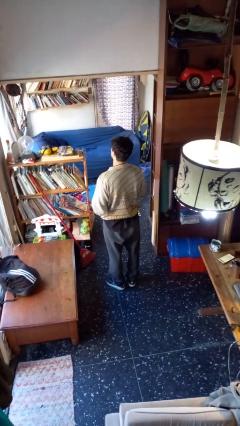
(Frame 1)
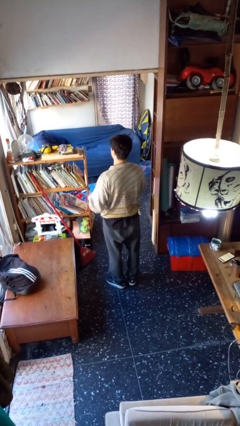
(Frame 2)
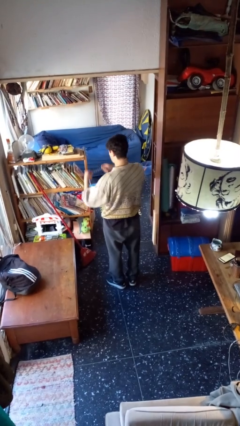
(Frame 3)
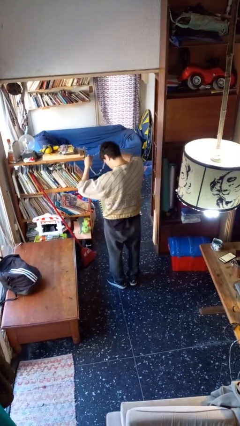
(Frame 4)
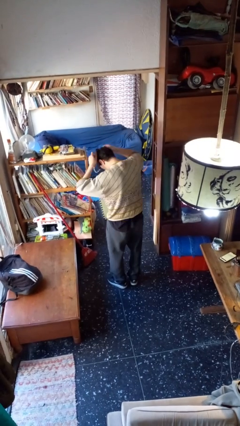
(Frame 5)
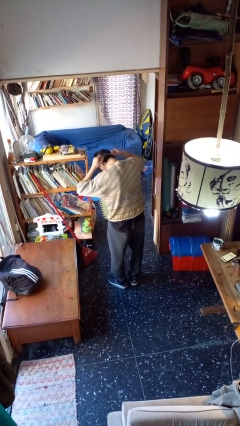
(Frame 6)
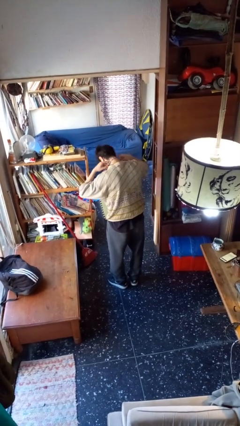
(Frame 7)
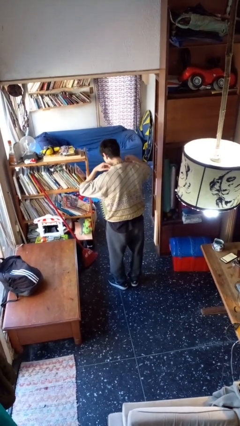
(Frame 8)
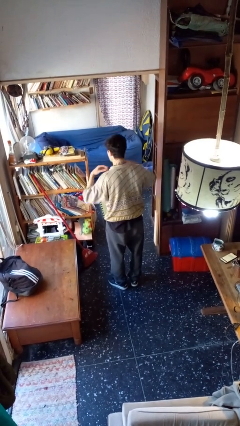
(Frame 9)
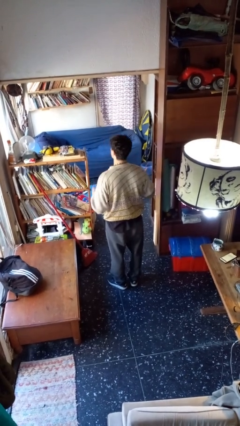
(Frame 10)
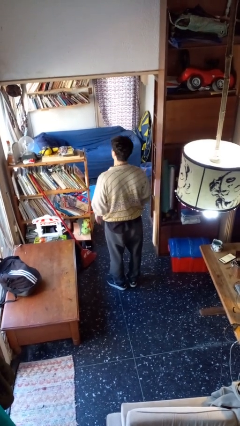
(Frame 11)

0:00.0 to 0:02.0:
person puts on necklace

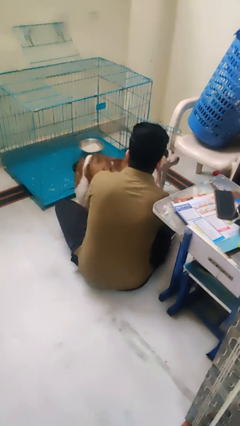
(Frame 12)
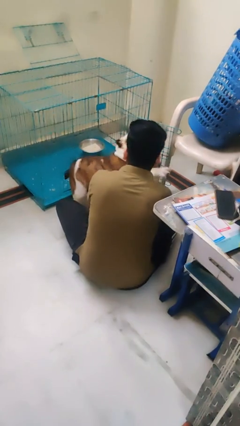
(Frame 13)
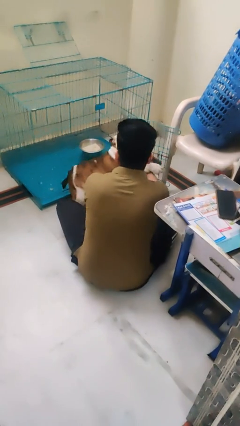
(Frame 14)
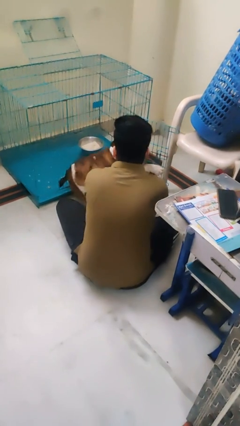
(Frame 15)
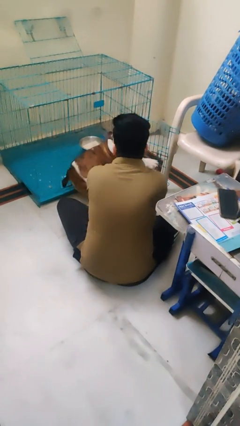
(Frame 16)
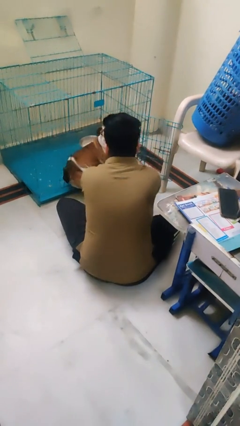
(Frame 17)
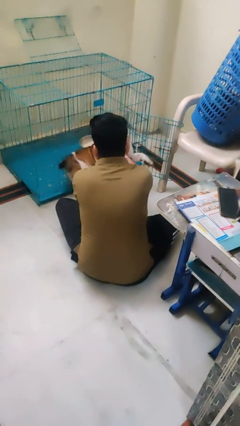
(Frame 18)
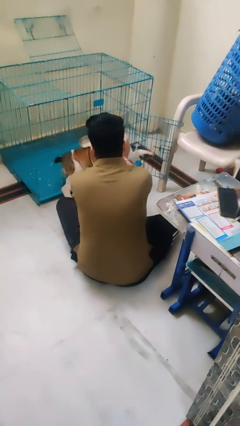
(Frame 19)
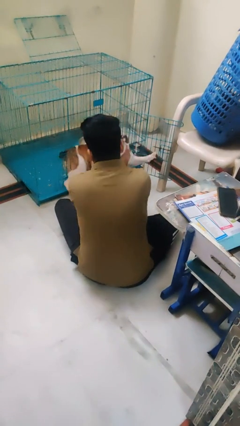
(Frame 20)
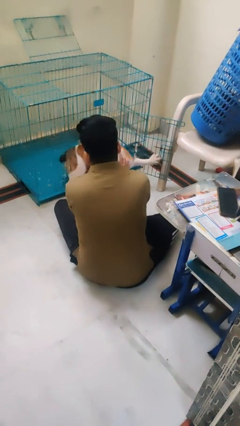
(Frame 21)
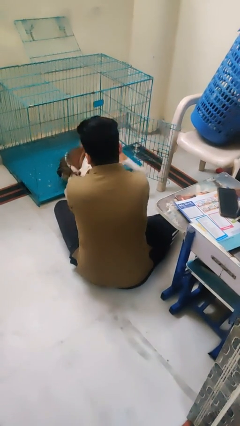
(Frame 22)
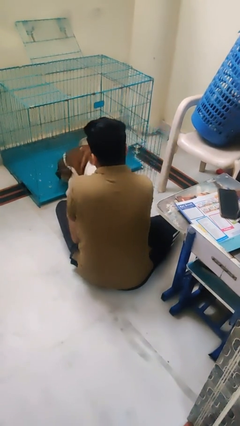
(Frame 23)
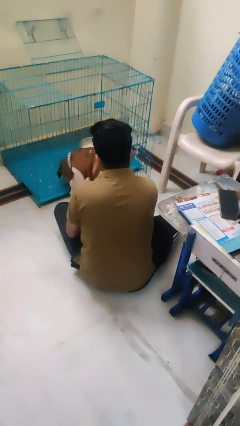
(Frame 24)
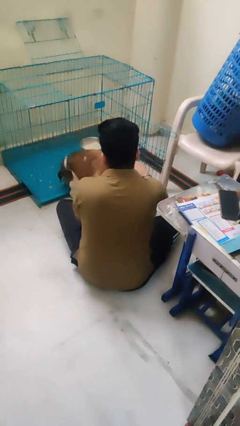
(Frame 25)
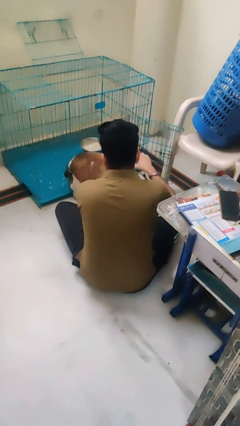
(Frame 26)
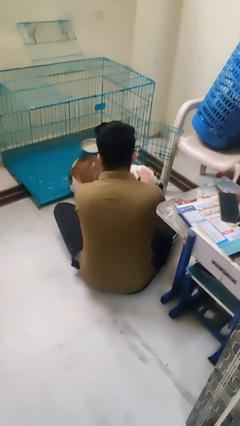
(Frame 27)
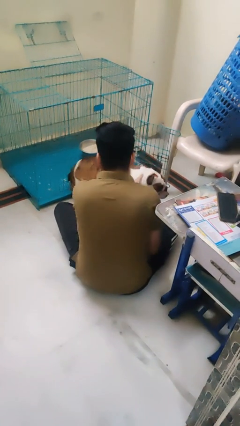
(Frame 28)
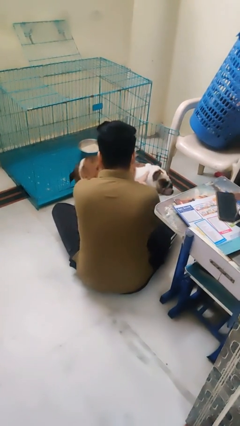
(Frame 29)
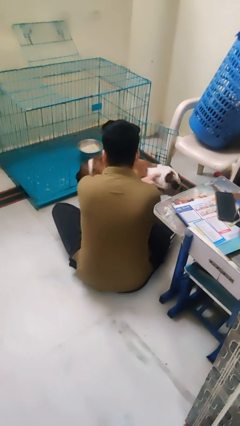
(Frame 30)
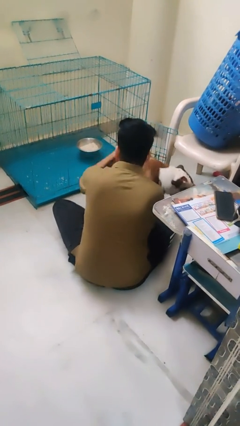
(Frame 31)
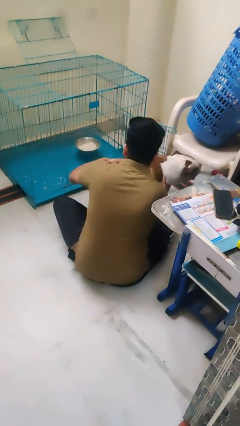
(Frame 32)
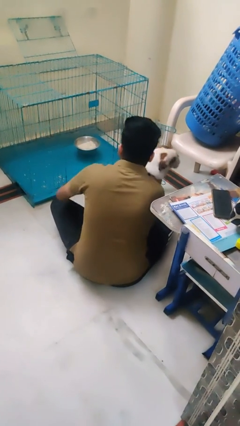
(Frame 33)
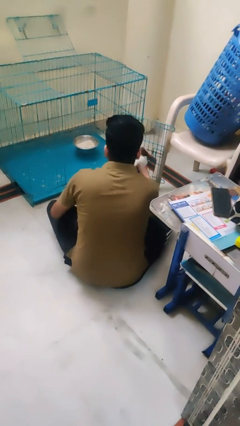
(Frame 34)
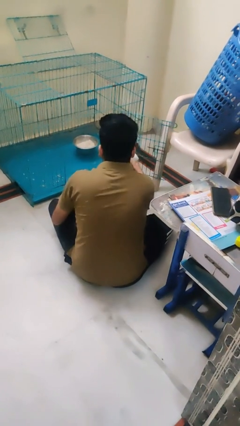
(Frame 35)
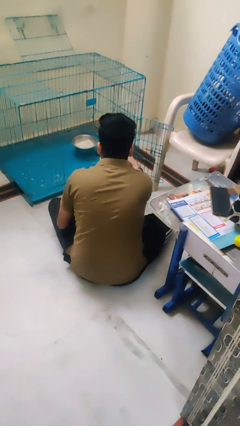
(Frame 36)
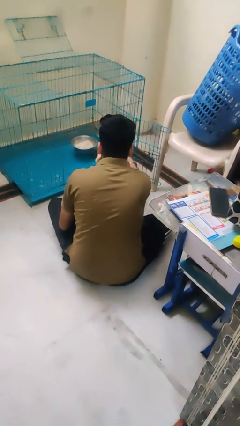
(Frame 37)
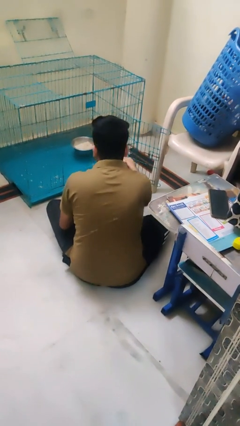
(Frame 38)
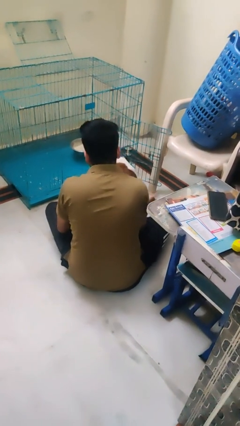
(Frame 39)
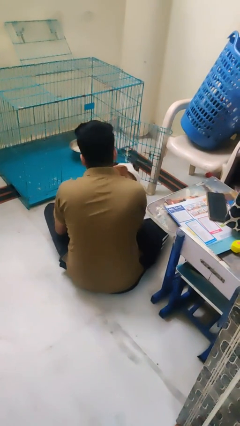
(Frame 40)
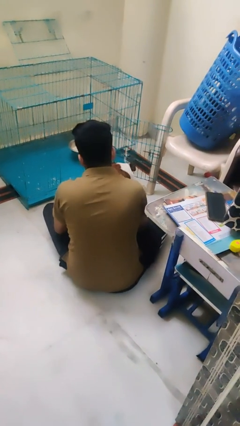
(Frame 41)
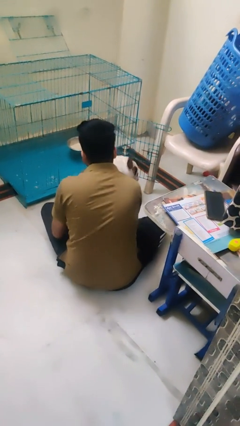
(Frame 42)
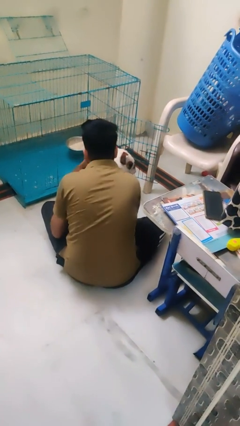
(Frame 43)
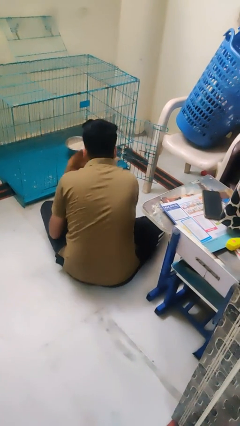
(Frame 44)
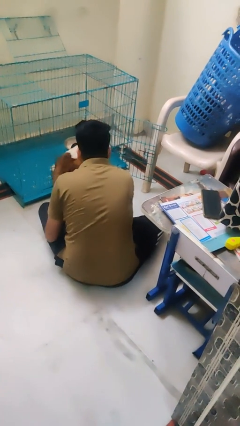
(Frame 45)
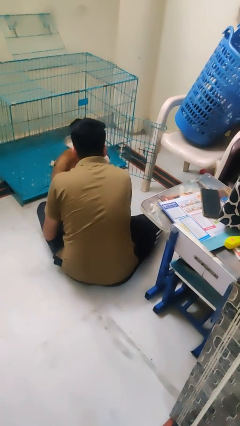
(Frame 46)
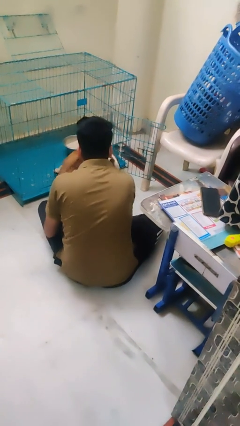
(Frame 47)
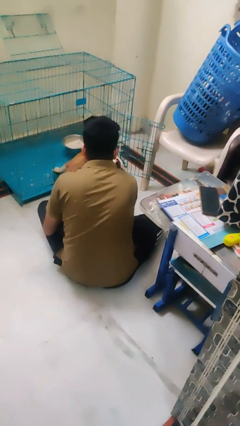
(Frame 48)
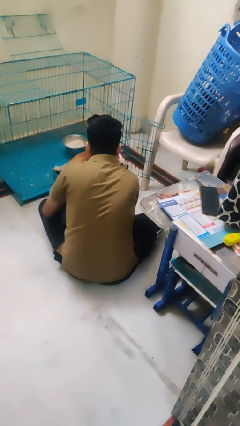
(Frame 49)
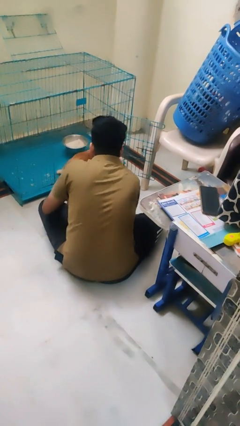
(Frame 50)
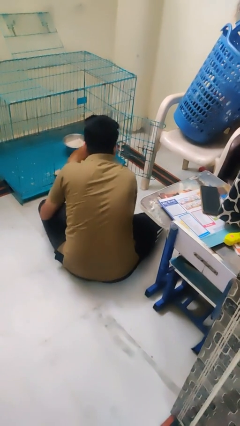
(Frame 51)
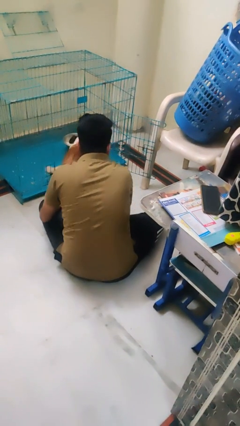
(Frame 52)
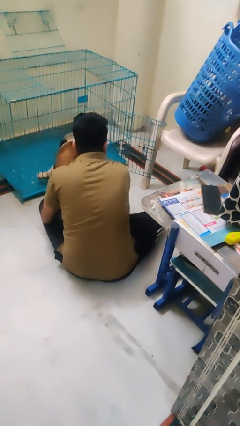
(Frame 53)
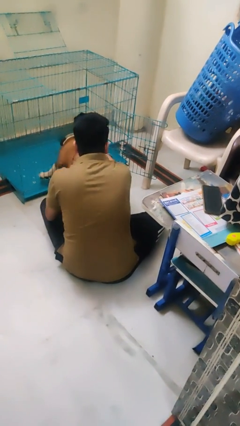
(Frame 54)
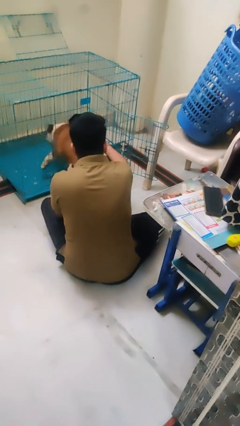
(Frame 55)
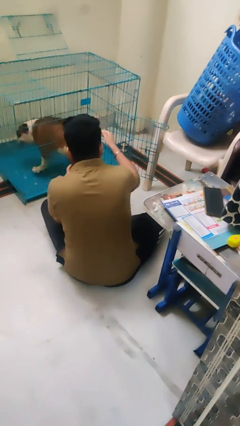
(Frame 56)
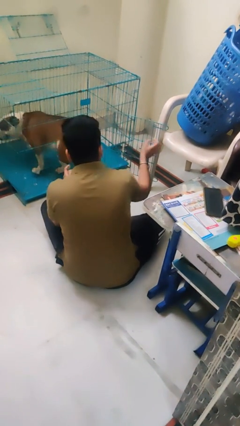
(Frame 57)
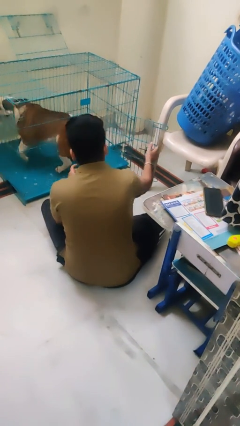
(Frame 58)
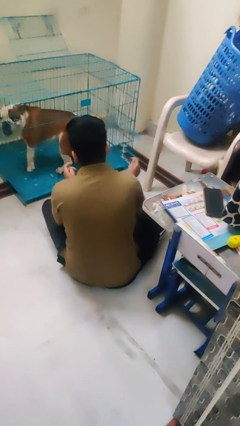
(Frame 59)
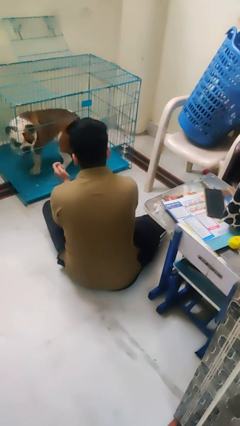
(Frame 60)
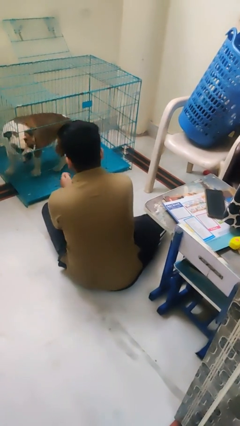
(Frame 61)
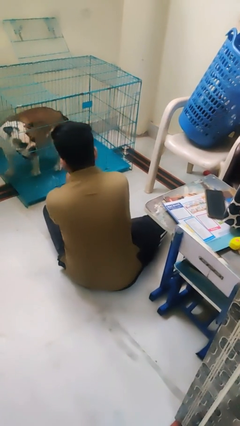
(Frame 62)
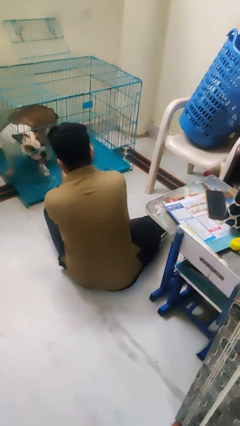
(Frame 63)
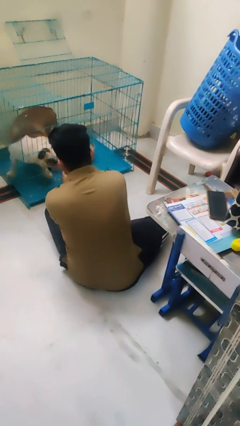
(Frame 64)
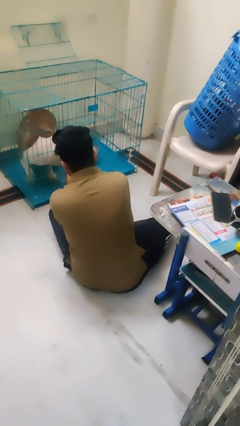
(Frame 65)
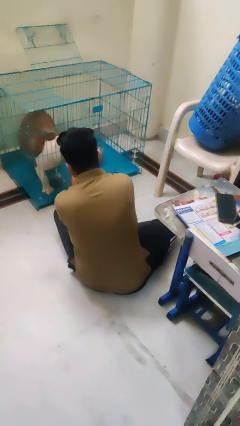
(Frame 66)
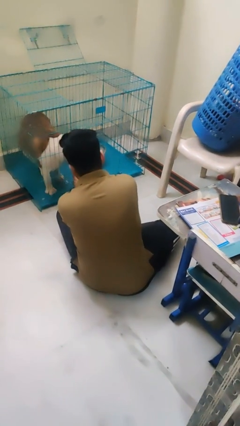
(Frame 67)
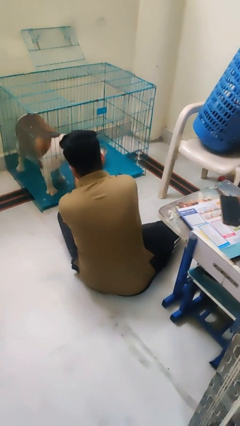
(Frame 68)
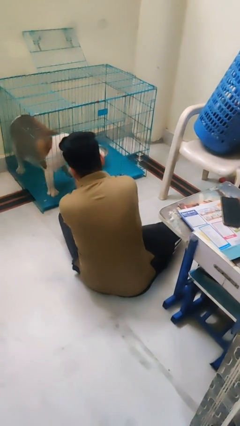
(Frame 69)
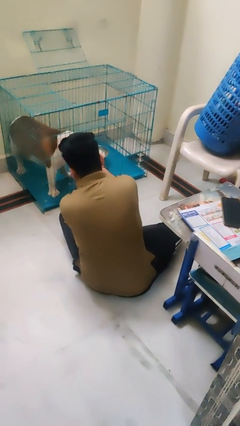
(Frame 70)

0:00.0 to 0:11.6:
person crates dog

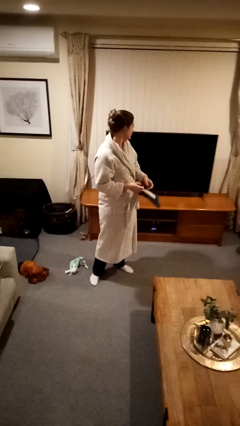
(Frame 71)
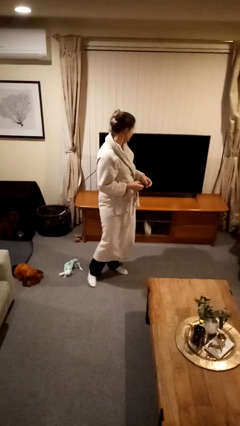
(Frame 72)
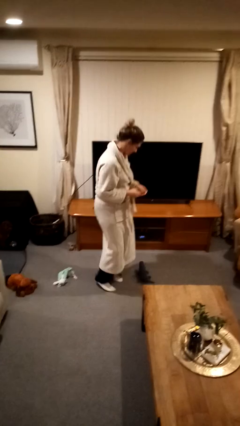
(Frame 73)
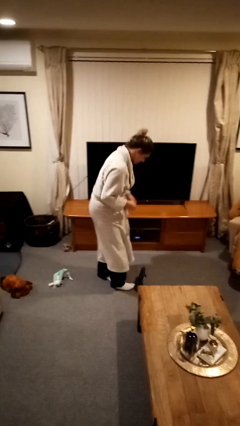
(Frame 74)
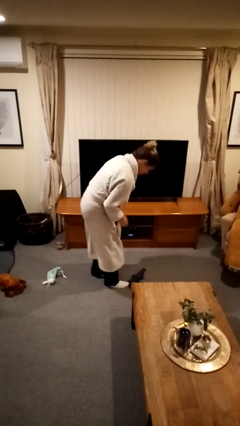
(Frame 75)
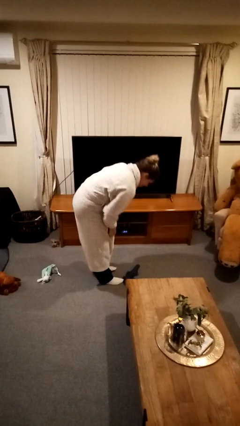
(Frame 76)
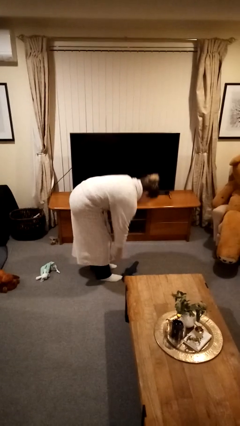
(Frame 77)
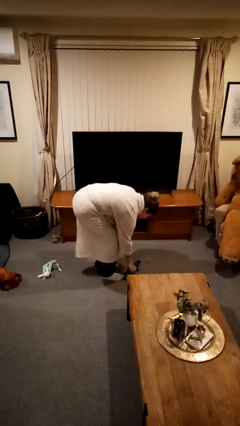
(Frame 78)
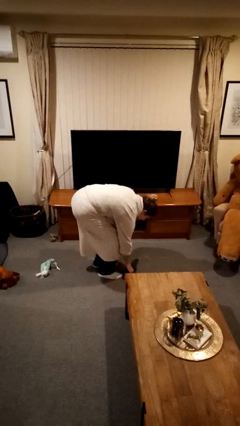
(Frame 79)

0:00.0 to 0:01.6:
person drops object

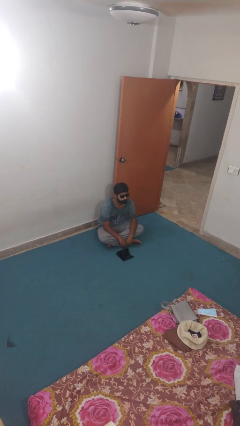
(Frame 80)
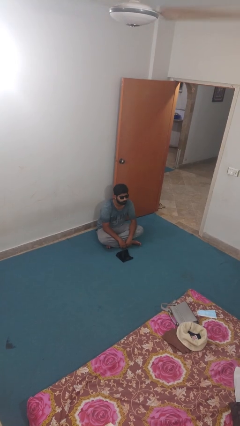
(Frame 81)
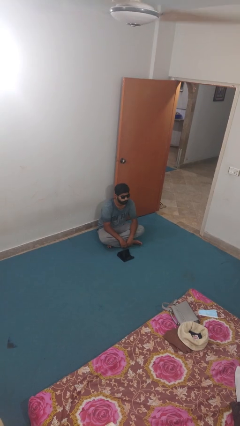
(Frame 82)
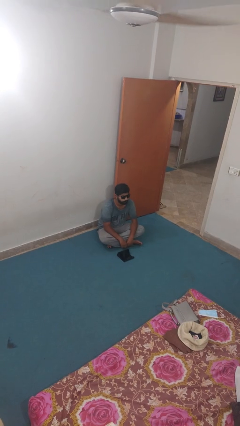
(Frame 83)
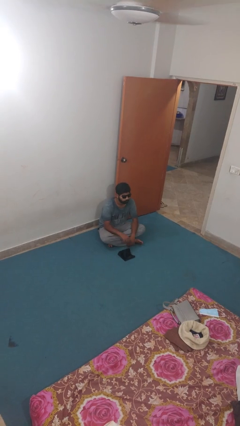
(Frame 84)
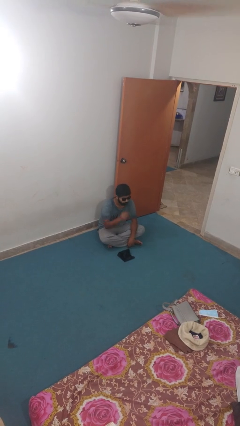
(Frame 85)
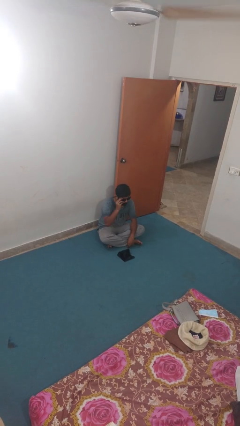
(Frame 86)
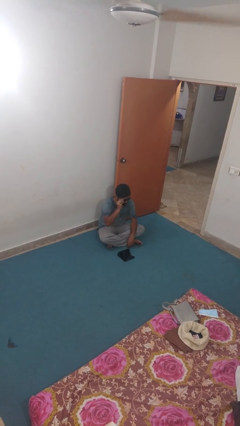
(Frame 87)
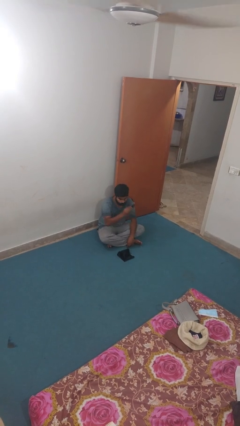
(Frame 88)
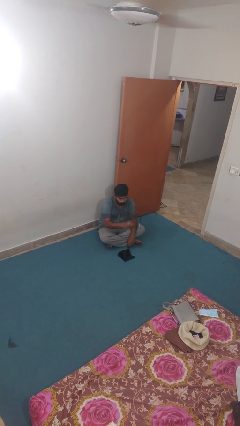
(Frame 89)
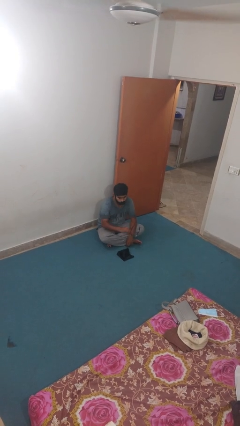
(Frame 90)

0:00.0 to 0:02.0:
person takes off sunglasses

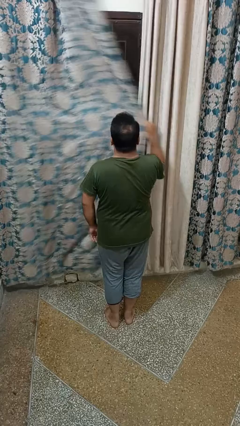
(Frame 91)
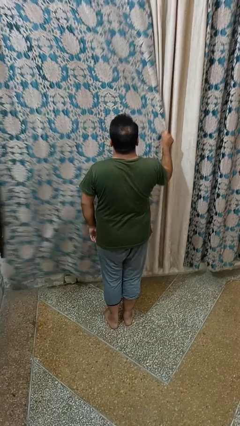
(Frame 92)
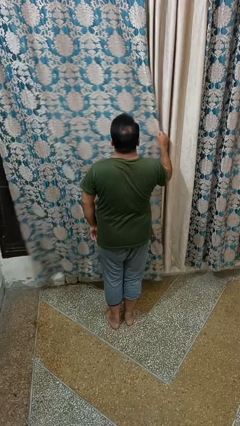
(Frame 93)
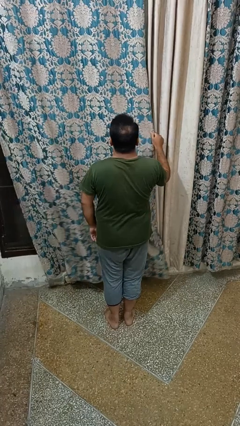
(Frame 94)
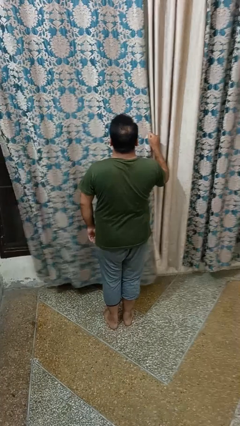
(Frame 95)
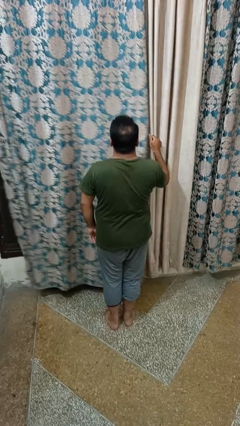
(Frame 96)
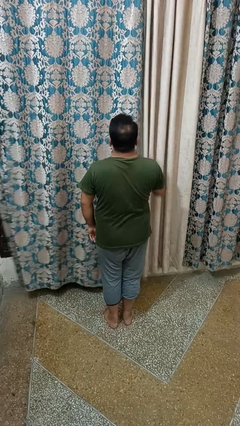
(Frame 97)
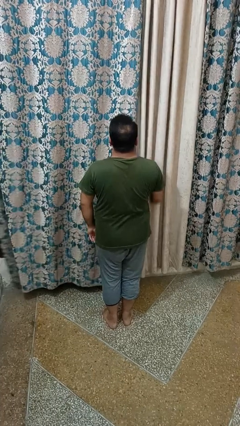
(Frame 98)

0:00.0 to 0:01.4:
person closes curtains
